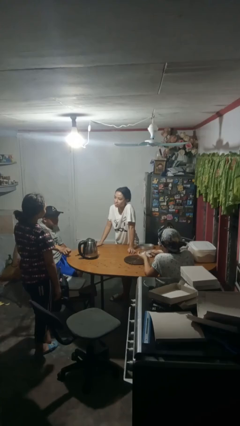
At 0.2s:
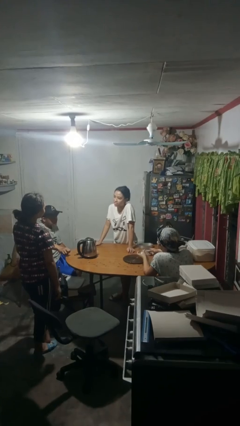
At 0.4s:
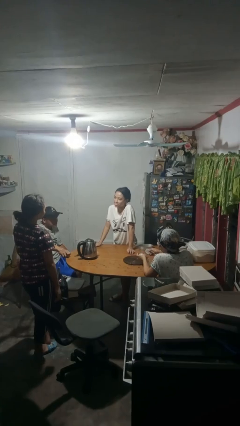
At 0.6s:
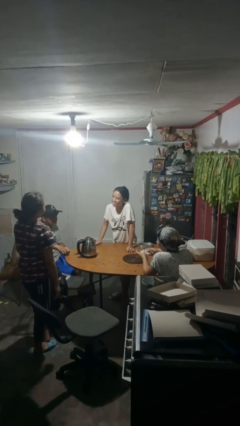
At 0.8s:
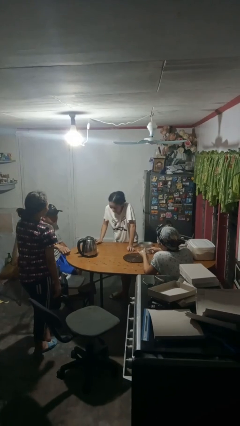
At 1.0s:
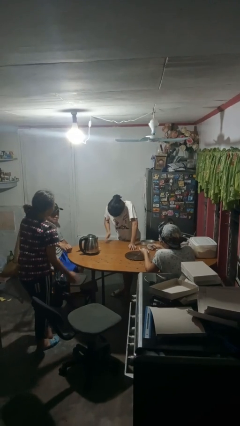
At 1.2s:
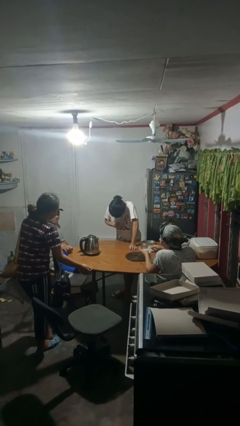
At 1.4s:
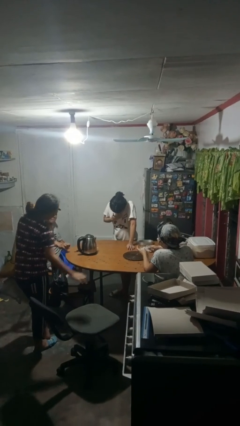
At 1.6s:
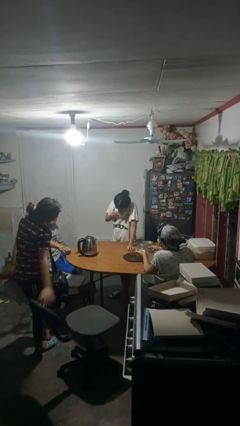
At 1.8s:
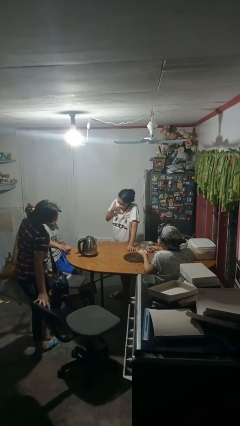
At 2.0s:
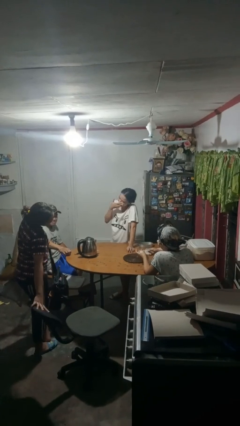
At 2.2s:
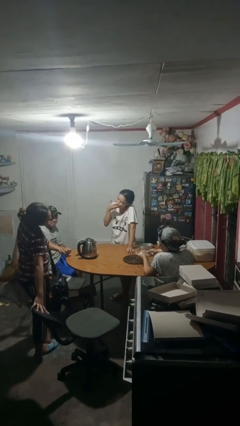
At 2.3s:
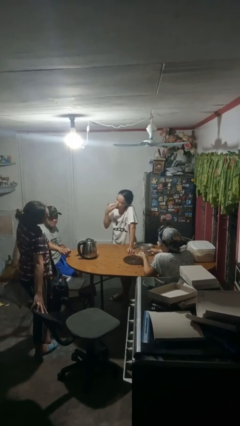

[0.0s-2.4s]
person laughs with person

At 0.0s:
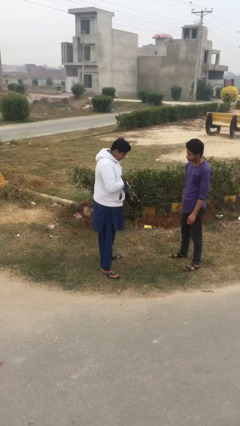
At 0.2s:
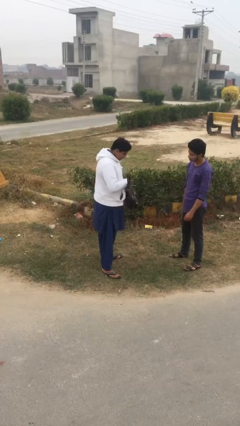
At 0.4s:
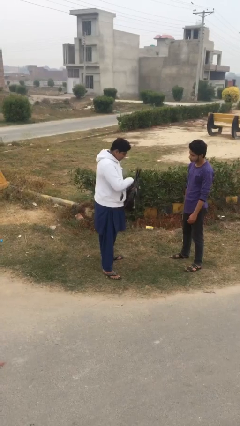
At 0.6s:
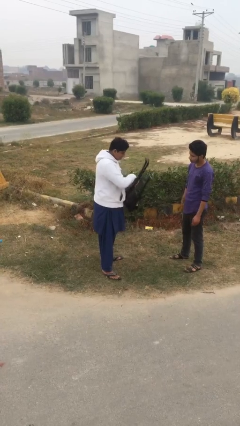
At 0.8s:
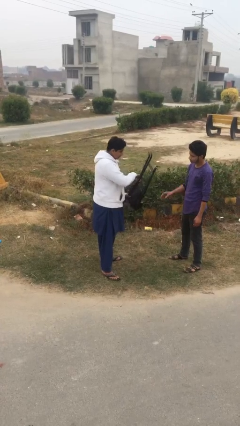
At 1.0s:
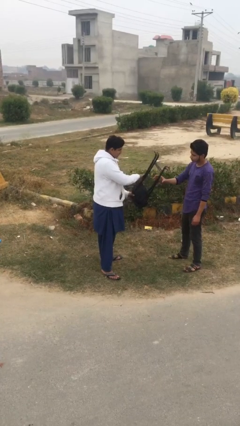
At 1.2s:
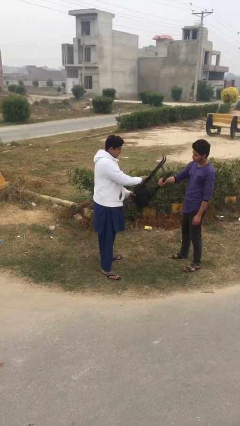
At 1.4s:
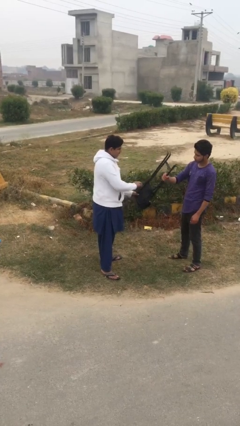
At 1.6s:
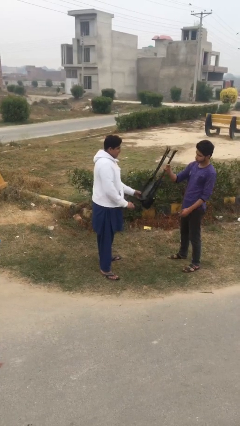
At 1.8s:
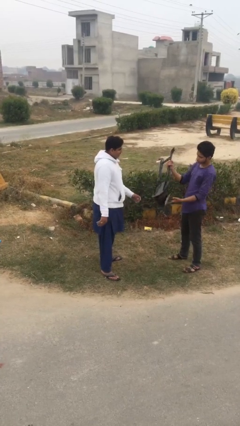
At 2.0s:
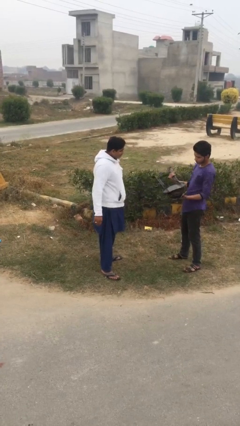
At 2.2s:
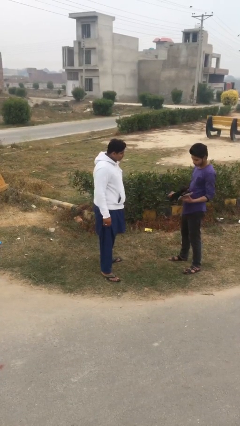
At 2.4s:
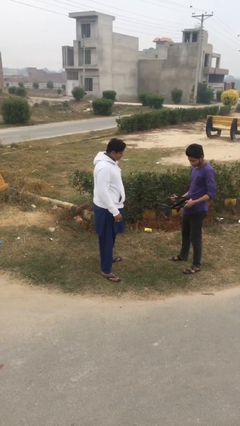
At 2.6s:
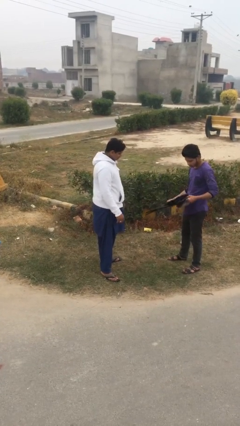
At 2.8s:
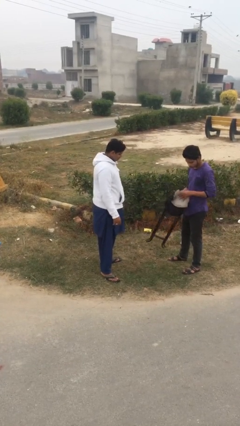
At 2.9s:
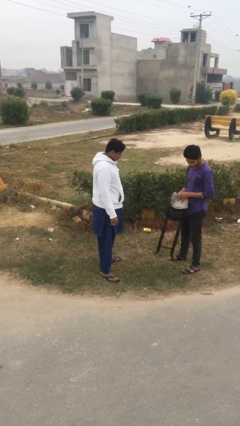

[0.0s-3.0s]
person transfers object to person

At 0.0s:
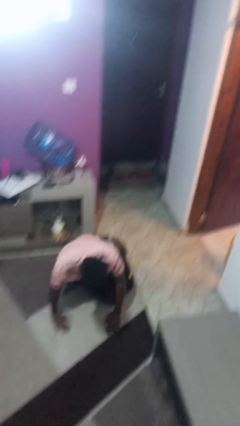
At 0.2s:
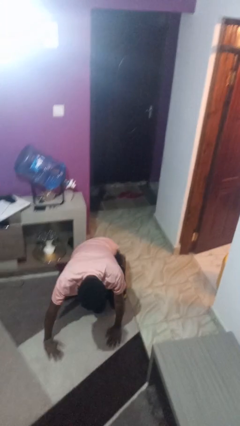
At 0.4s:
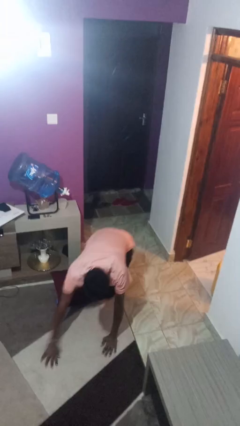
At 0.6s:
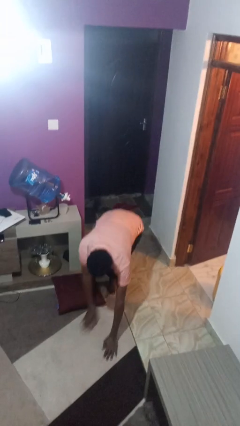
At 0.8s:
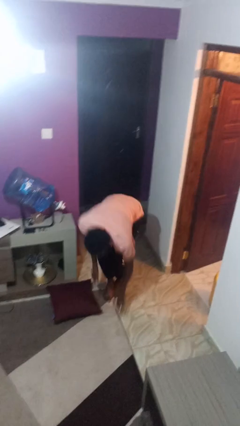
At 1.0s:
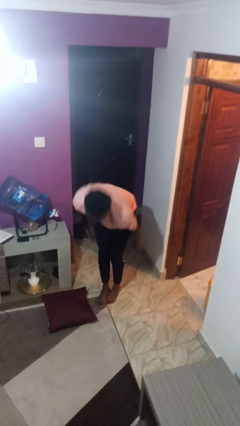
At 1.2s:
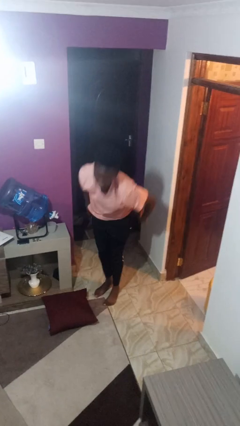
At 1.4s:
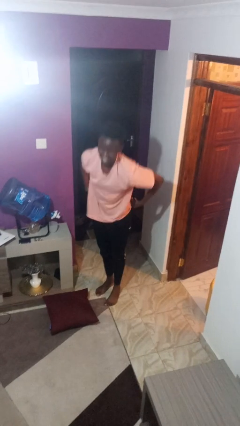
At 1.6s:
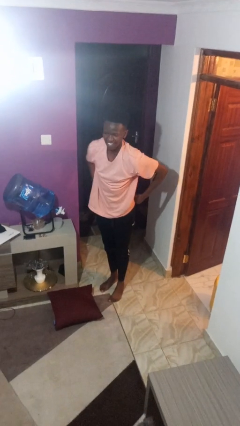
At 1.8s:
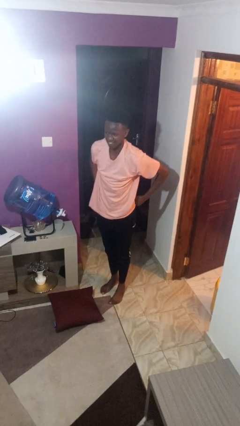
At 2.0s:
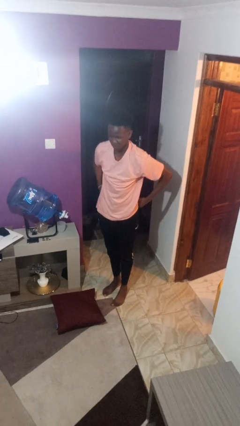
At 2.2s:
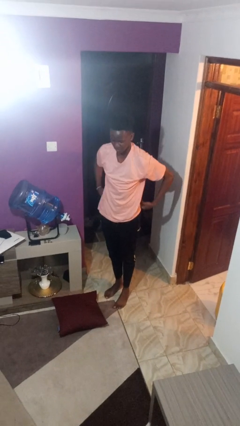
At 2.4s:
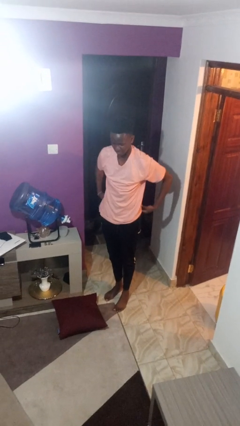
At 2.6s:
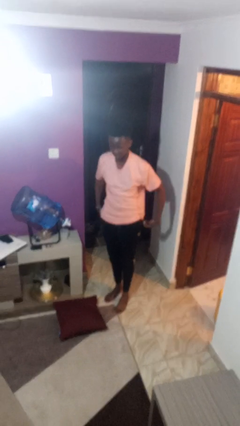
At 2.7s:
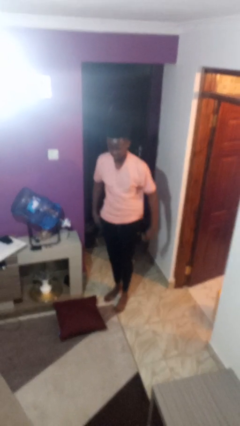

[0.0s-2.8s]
person stands up from floor

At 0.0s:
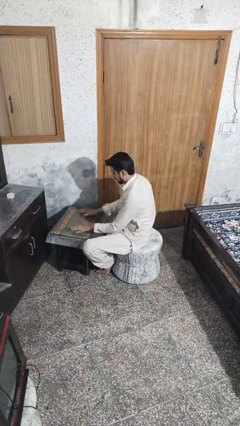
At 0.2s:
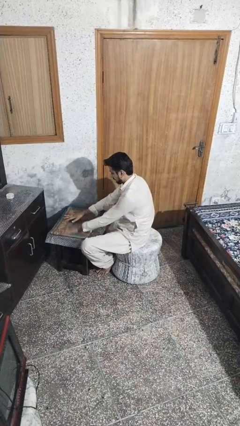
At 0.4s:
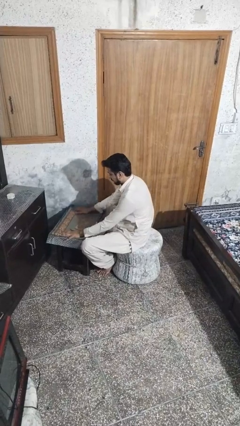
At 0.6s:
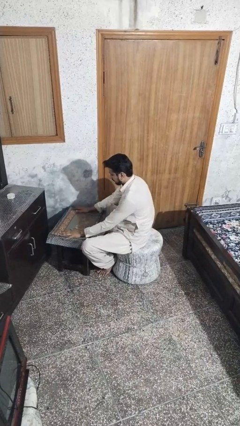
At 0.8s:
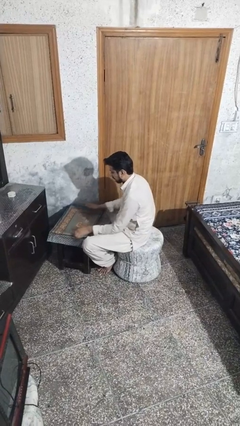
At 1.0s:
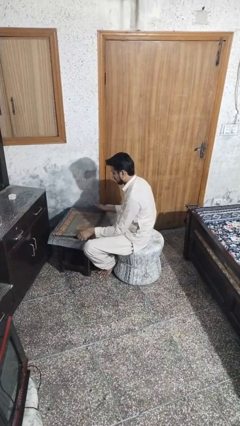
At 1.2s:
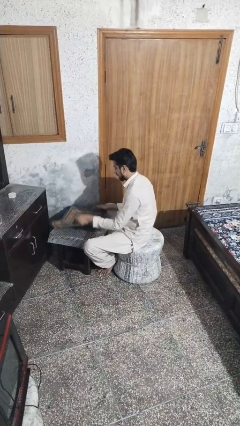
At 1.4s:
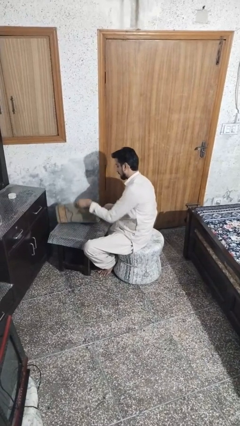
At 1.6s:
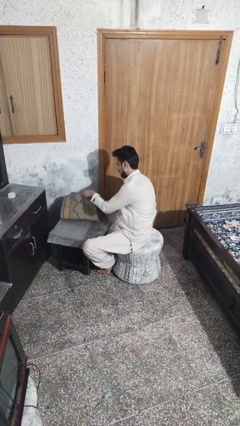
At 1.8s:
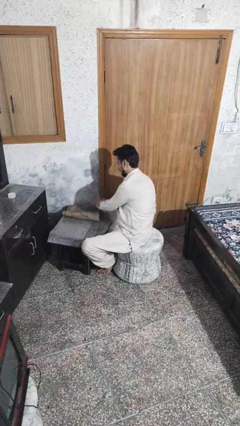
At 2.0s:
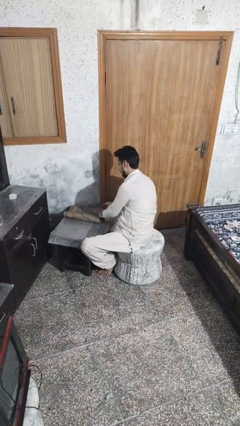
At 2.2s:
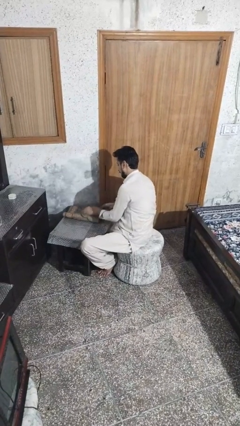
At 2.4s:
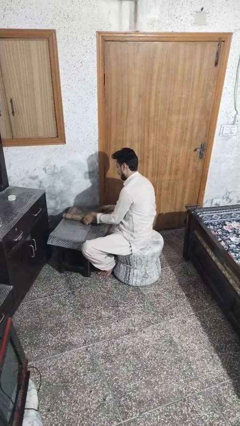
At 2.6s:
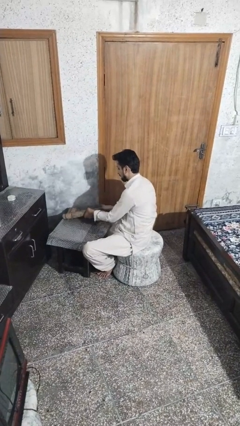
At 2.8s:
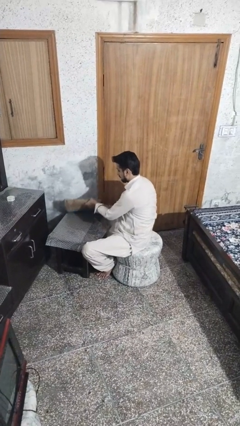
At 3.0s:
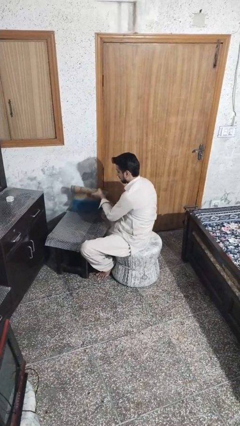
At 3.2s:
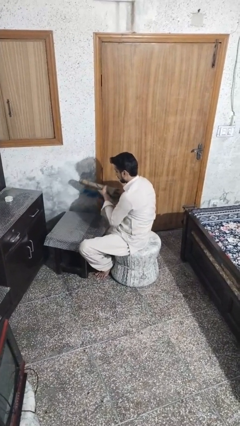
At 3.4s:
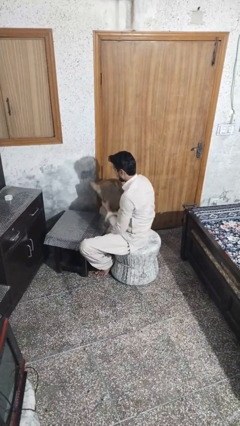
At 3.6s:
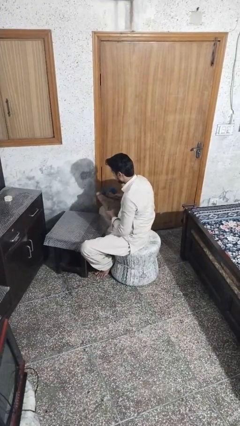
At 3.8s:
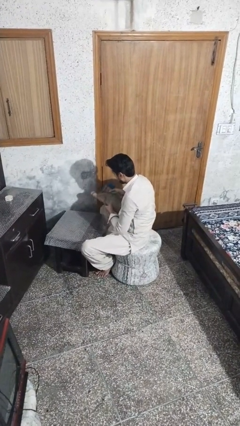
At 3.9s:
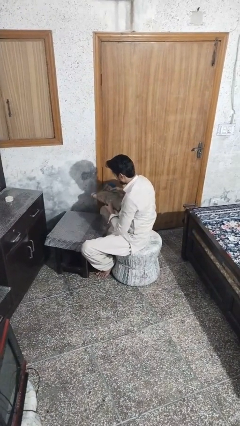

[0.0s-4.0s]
person folds tablecloth

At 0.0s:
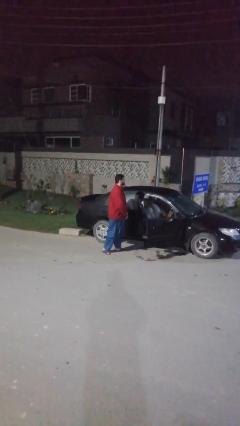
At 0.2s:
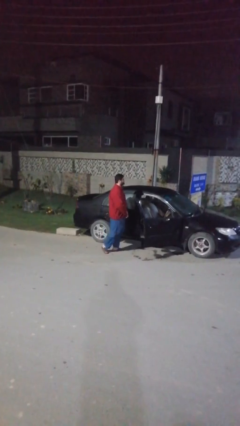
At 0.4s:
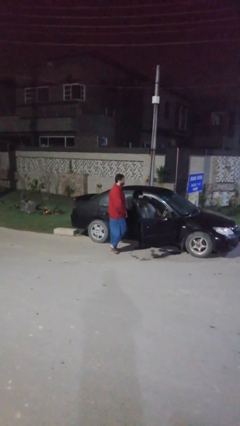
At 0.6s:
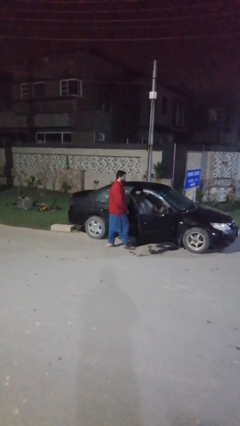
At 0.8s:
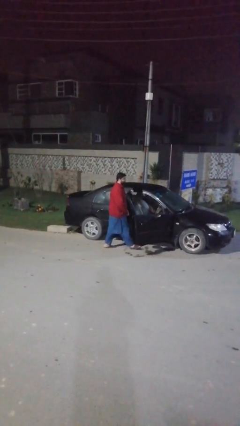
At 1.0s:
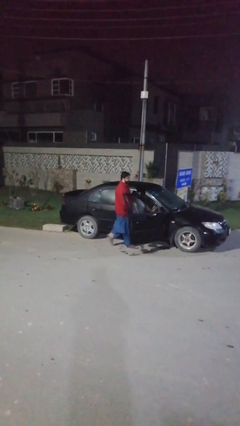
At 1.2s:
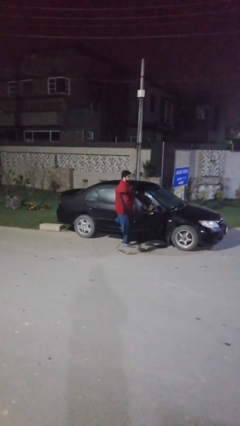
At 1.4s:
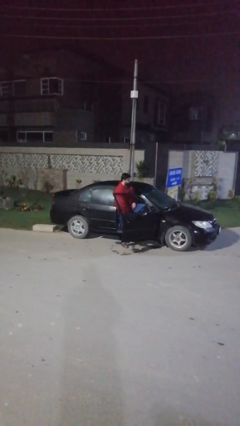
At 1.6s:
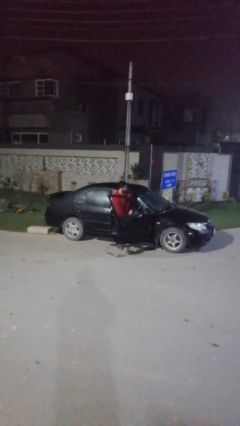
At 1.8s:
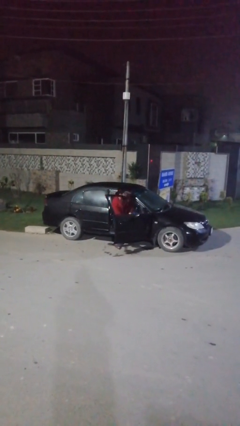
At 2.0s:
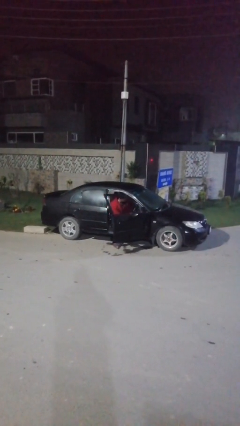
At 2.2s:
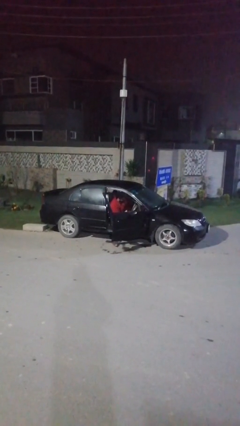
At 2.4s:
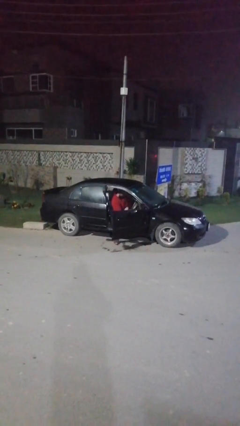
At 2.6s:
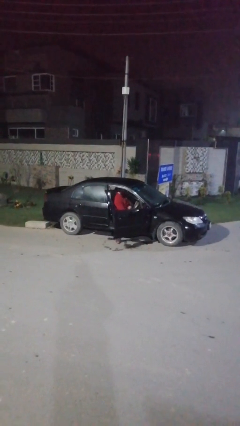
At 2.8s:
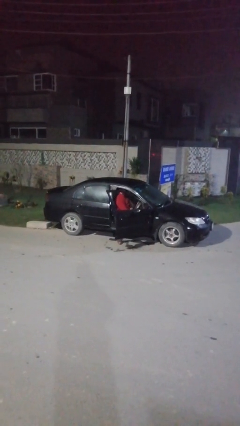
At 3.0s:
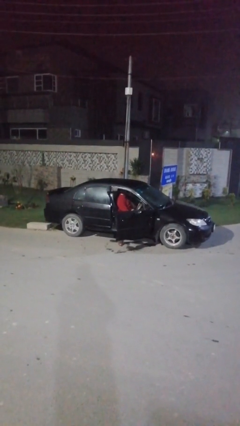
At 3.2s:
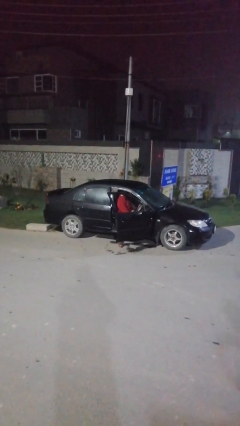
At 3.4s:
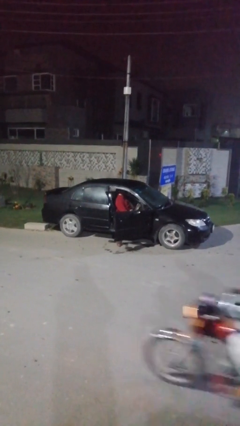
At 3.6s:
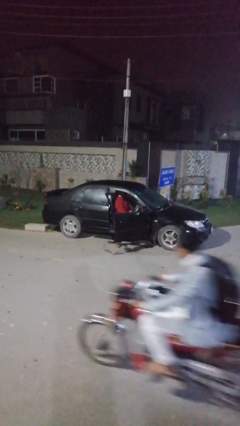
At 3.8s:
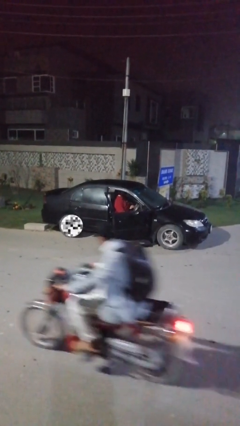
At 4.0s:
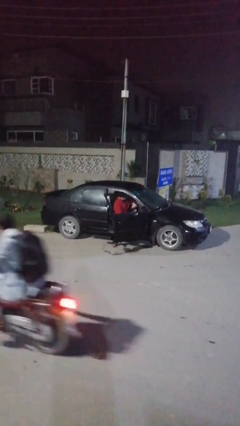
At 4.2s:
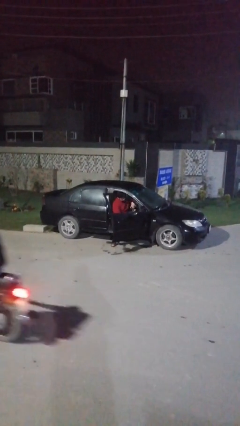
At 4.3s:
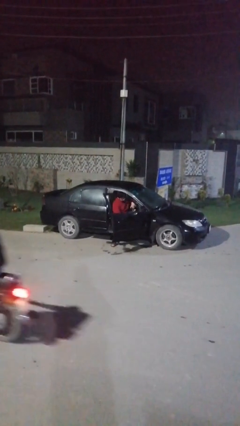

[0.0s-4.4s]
person enters car

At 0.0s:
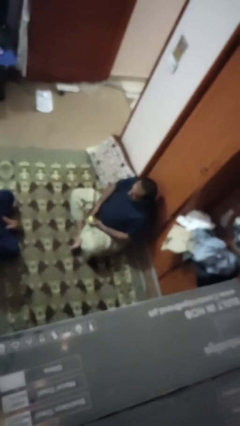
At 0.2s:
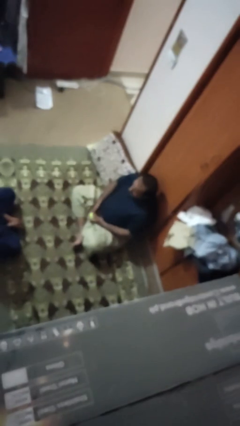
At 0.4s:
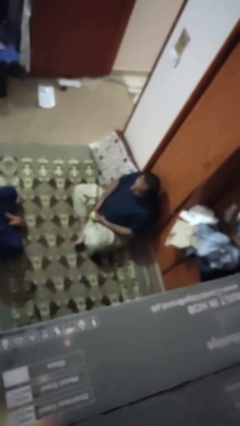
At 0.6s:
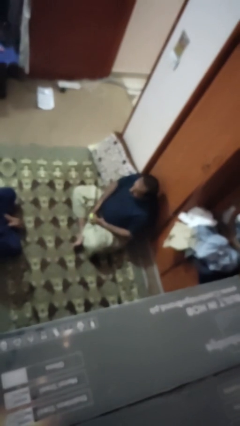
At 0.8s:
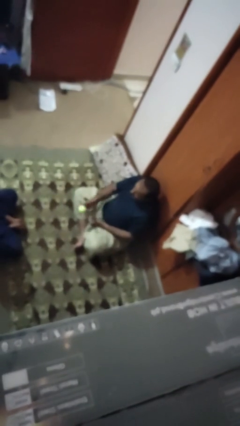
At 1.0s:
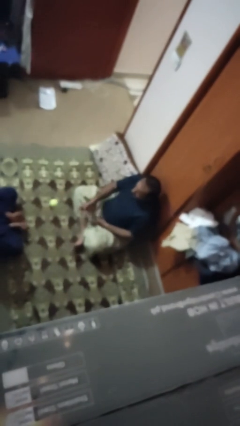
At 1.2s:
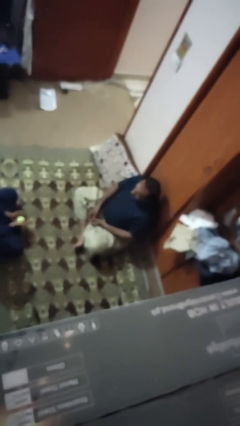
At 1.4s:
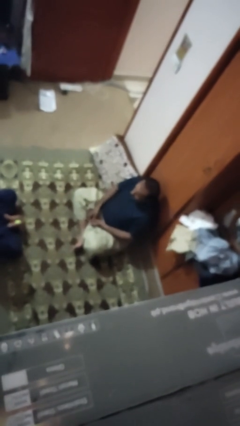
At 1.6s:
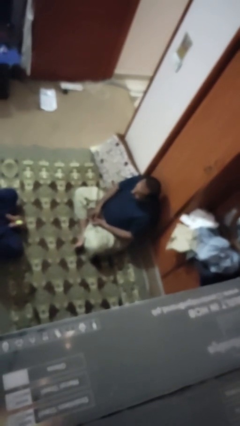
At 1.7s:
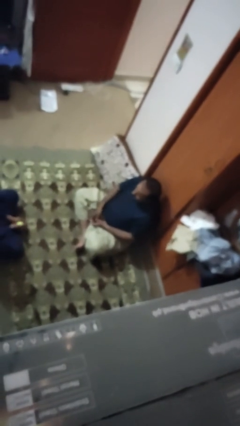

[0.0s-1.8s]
person throws object to person
